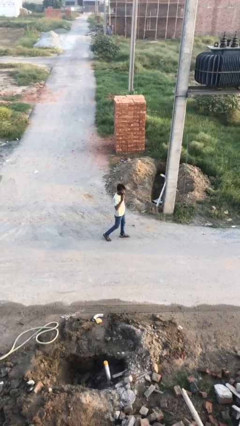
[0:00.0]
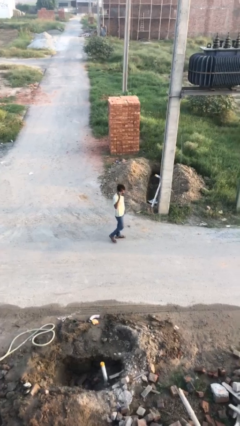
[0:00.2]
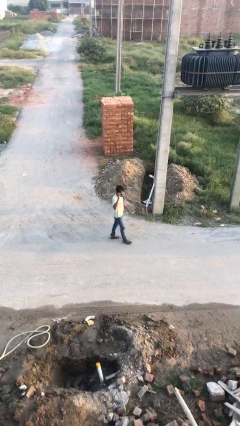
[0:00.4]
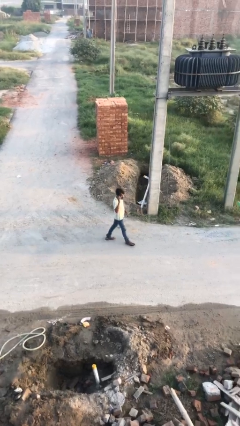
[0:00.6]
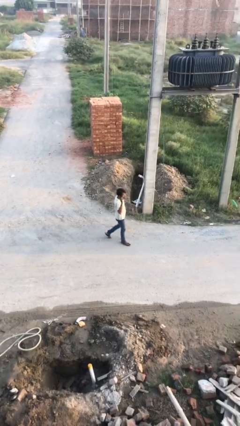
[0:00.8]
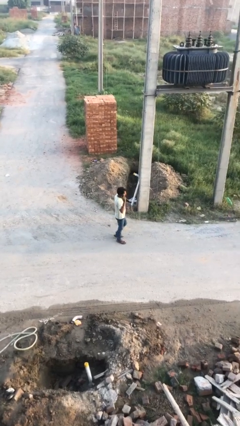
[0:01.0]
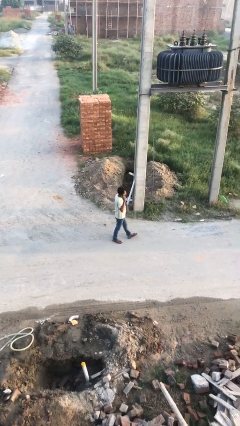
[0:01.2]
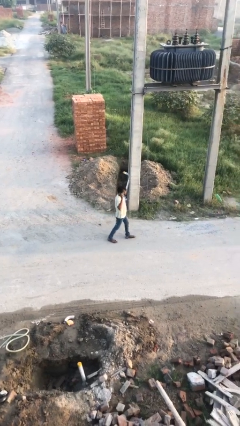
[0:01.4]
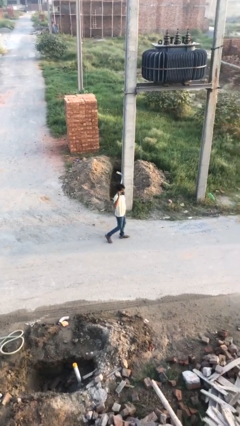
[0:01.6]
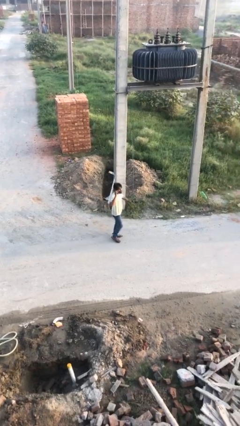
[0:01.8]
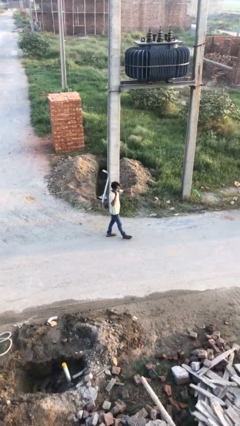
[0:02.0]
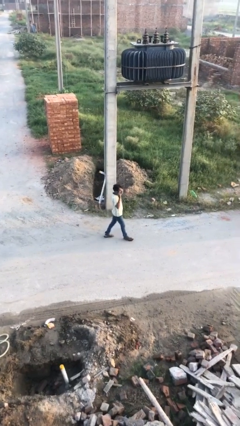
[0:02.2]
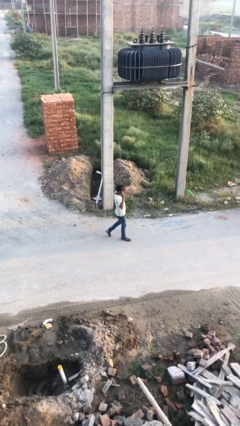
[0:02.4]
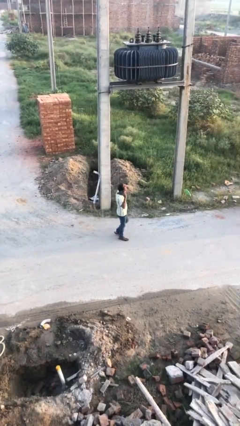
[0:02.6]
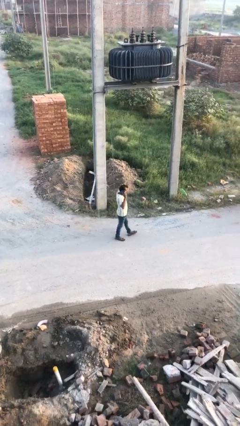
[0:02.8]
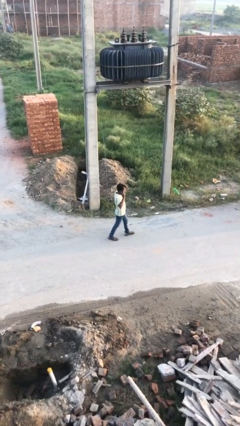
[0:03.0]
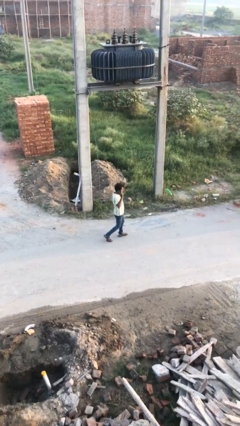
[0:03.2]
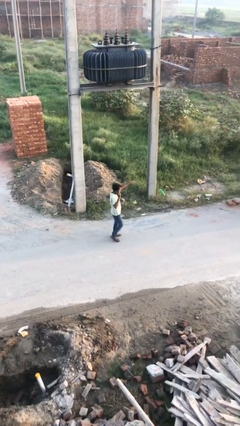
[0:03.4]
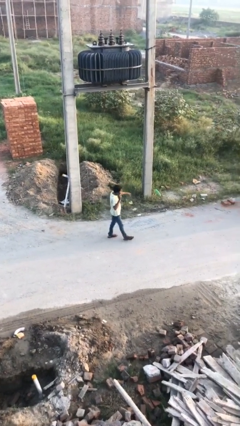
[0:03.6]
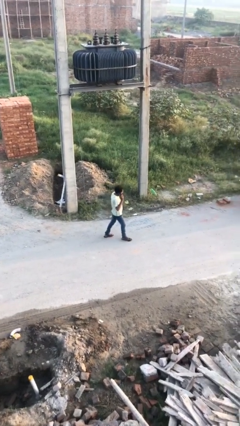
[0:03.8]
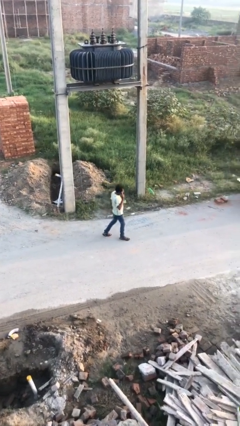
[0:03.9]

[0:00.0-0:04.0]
person talks on phone

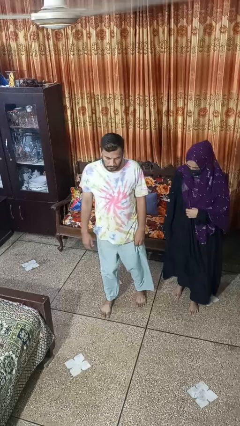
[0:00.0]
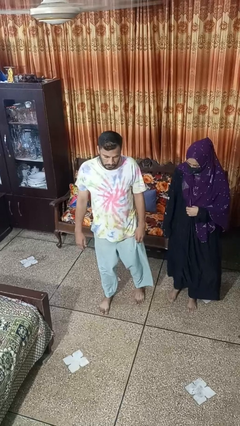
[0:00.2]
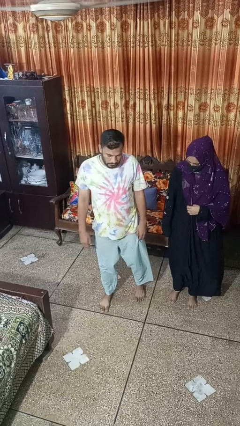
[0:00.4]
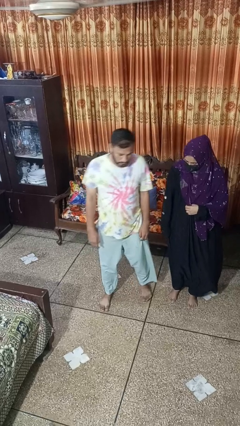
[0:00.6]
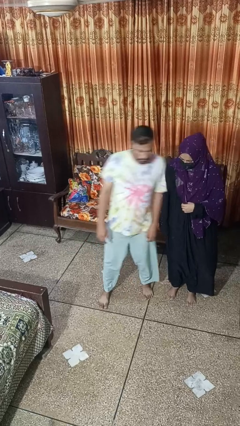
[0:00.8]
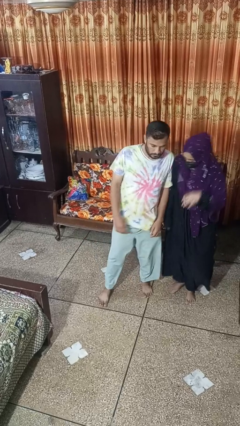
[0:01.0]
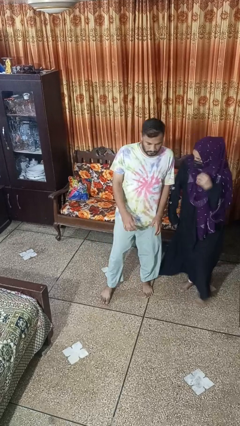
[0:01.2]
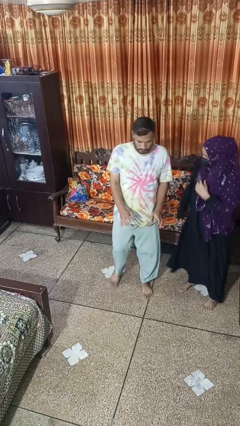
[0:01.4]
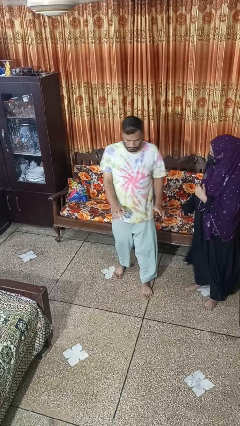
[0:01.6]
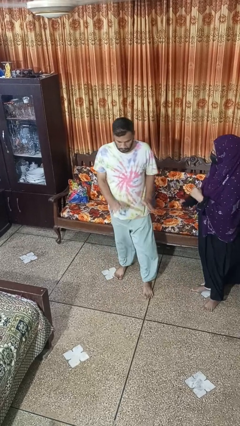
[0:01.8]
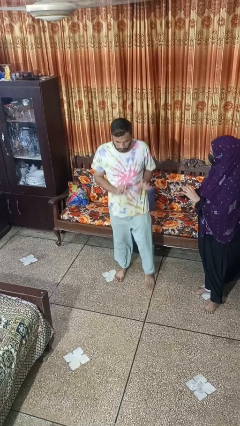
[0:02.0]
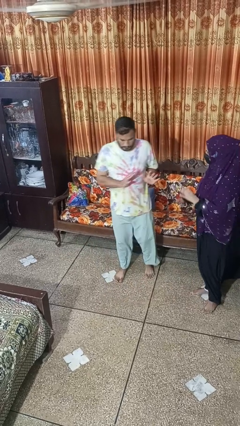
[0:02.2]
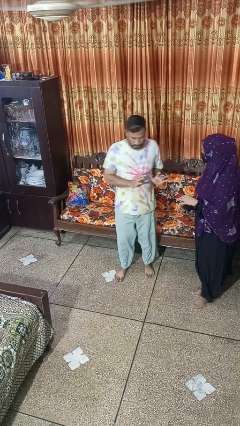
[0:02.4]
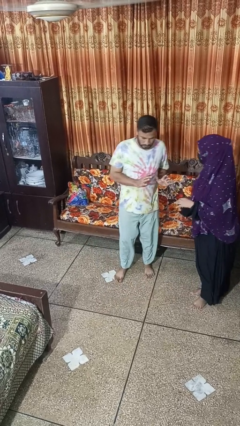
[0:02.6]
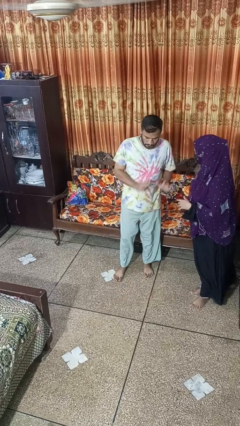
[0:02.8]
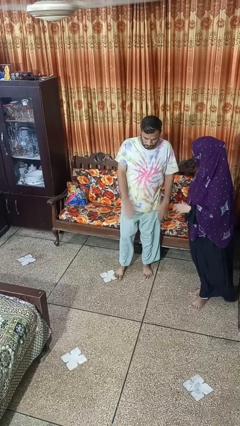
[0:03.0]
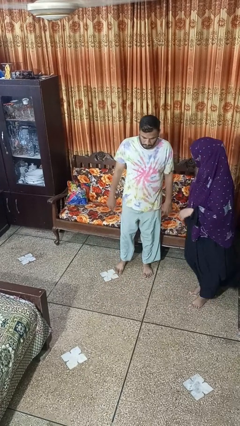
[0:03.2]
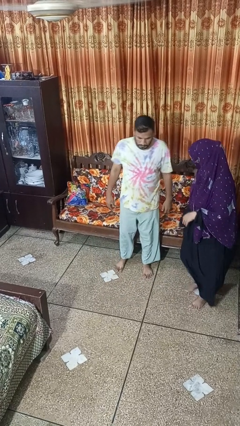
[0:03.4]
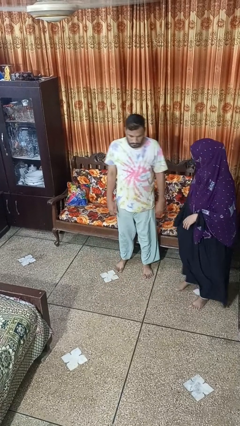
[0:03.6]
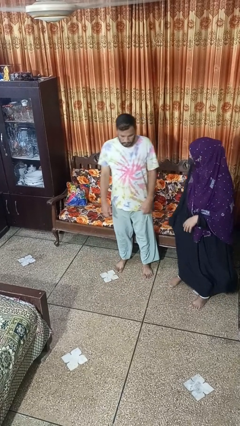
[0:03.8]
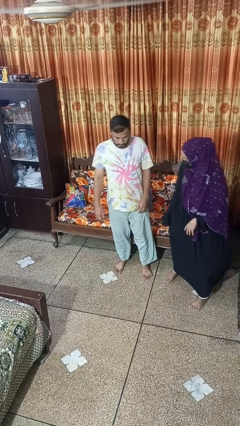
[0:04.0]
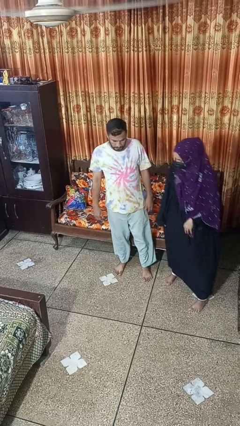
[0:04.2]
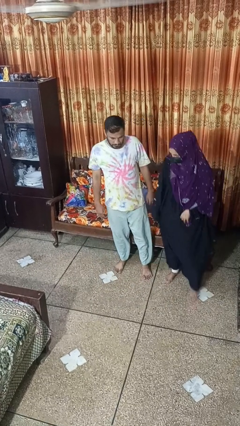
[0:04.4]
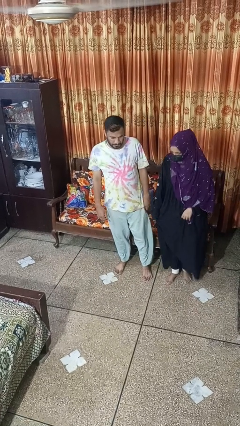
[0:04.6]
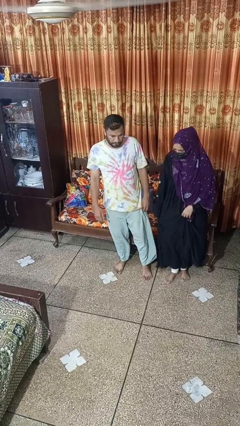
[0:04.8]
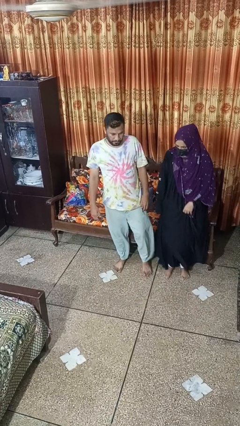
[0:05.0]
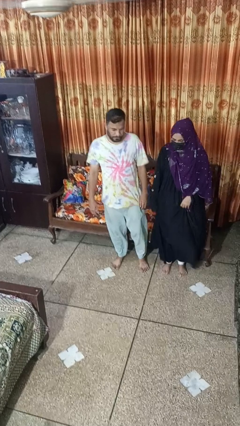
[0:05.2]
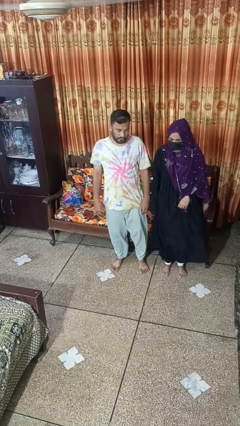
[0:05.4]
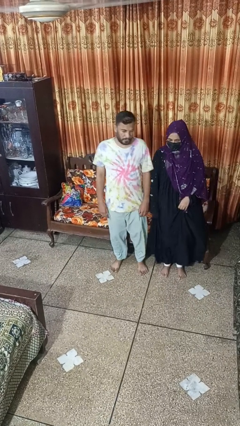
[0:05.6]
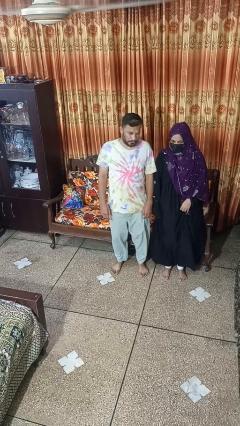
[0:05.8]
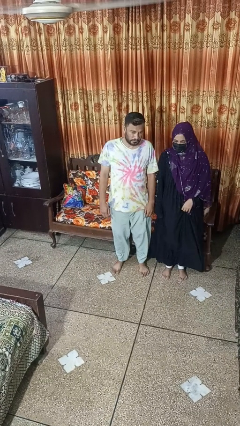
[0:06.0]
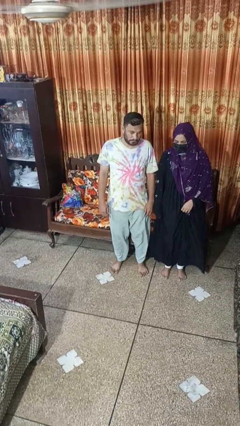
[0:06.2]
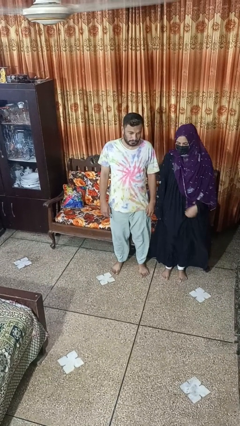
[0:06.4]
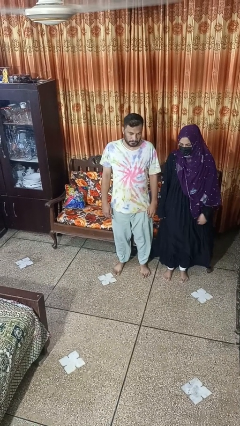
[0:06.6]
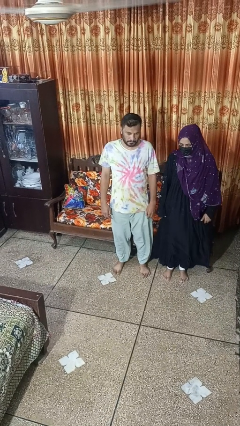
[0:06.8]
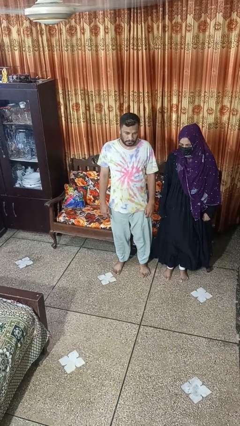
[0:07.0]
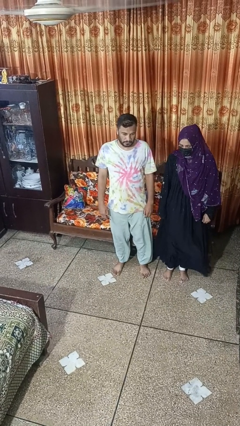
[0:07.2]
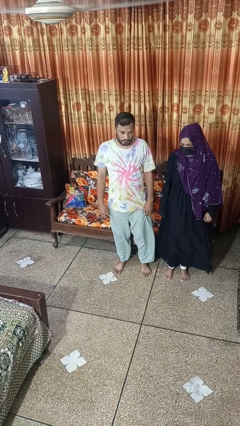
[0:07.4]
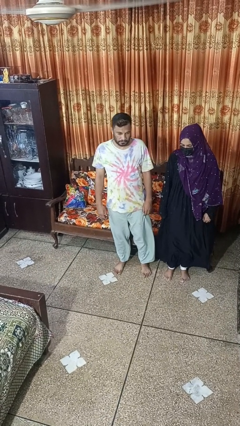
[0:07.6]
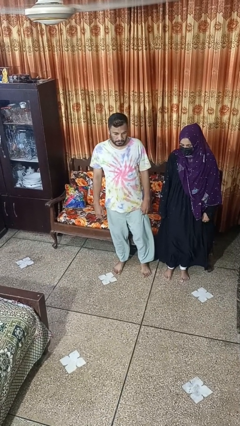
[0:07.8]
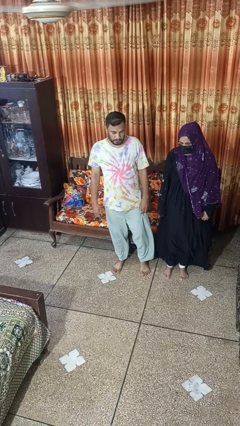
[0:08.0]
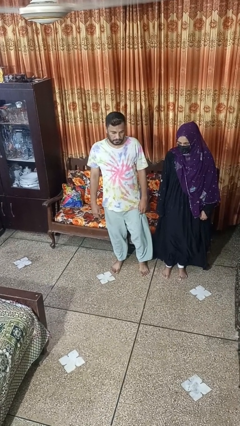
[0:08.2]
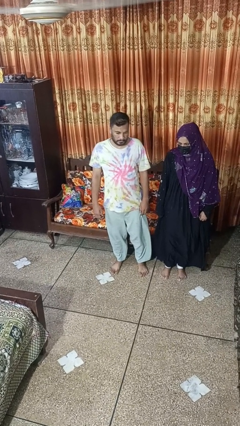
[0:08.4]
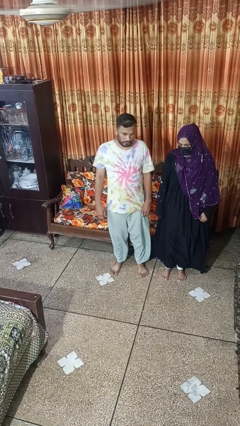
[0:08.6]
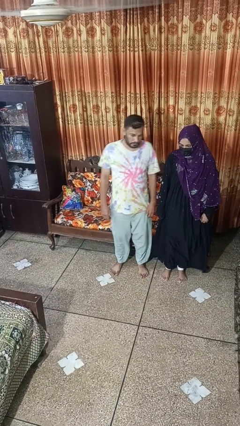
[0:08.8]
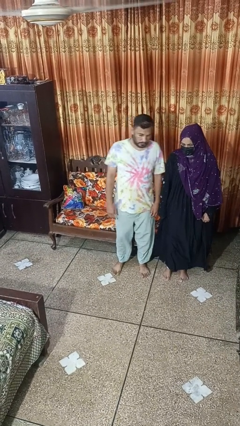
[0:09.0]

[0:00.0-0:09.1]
person bumps into person

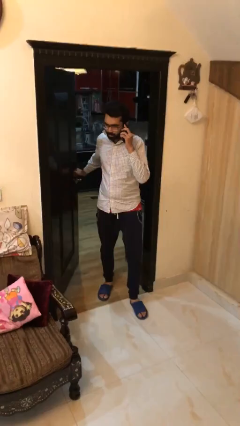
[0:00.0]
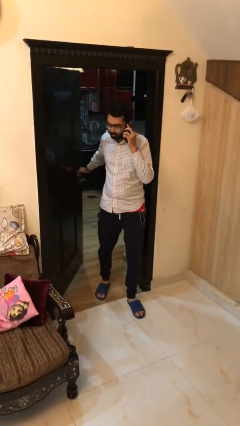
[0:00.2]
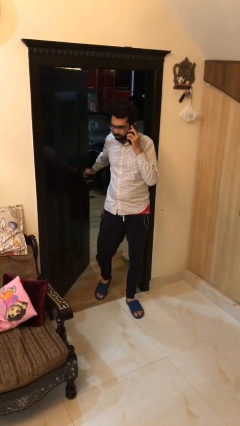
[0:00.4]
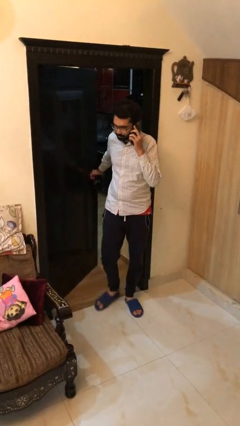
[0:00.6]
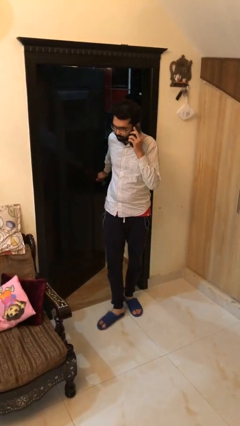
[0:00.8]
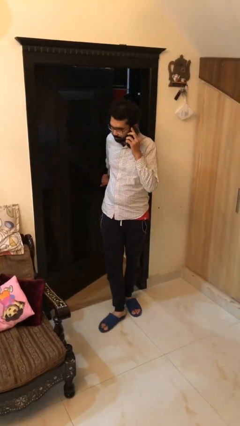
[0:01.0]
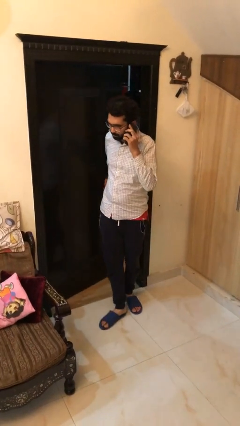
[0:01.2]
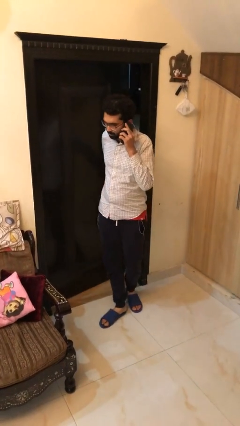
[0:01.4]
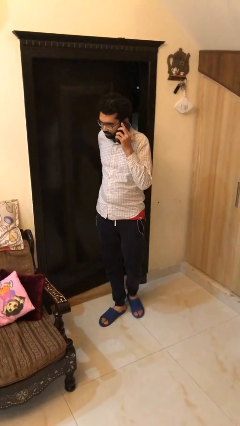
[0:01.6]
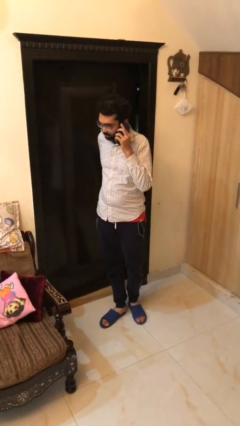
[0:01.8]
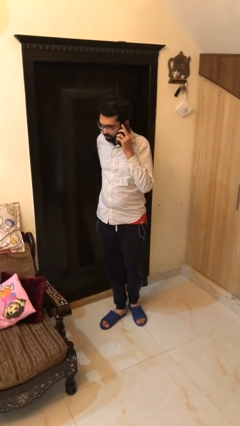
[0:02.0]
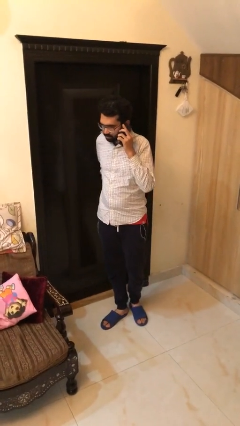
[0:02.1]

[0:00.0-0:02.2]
person closes facility door

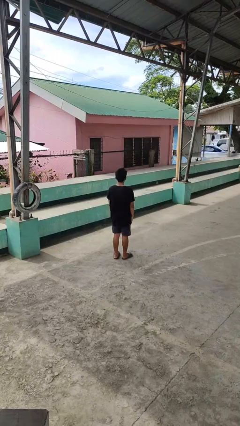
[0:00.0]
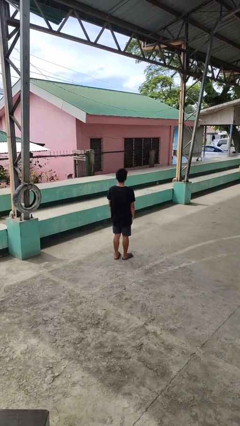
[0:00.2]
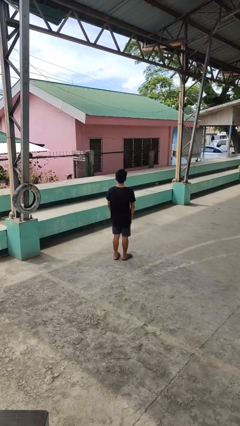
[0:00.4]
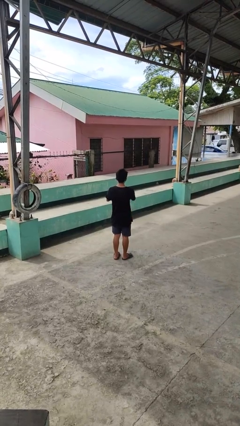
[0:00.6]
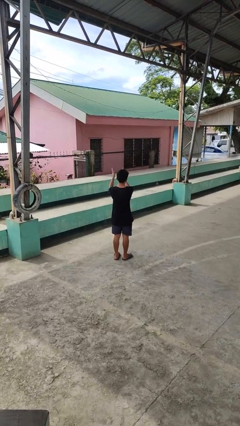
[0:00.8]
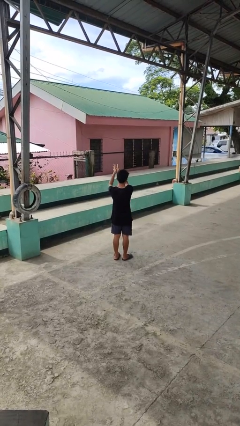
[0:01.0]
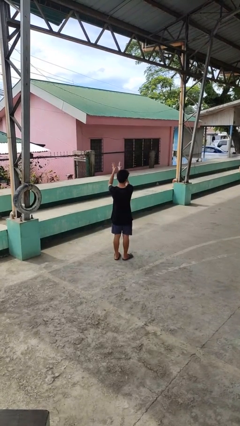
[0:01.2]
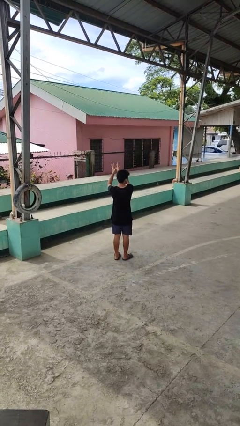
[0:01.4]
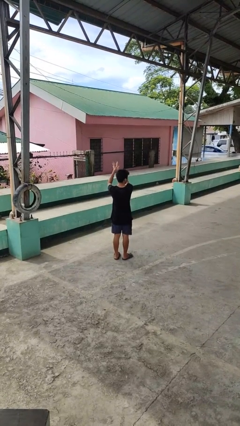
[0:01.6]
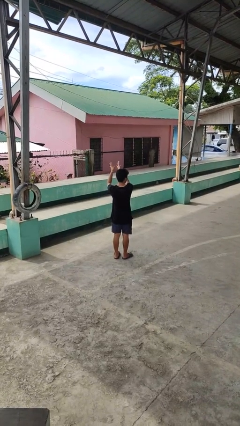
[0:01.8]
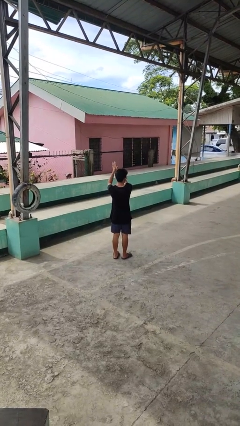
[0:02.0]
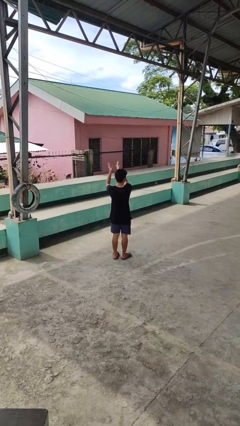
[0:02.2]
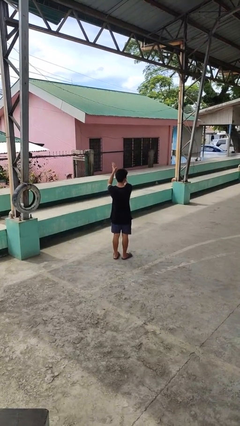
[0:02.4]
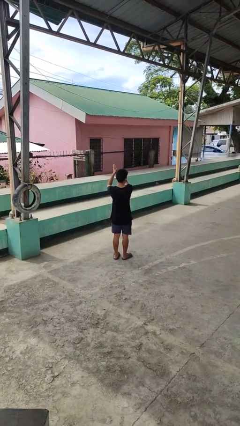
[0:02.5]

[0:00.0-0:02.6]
person claps hands
